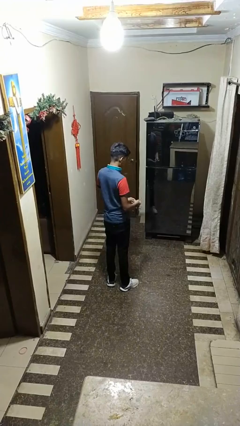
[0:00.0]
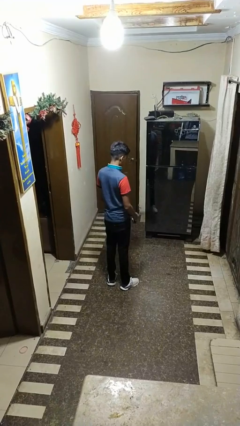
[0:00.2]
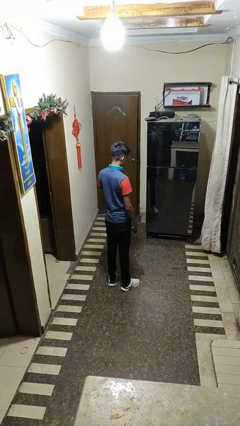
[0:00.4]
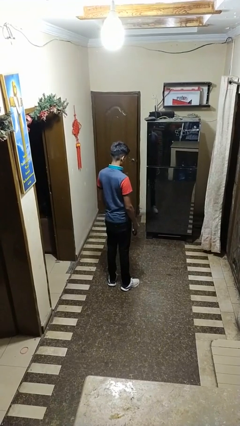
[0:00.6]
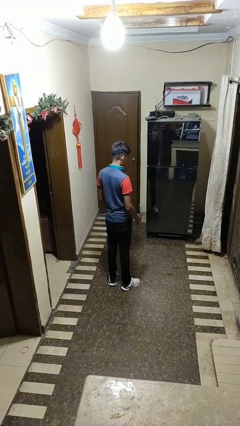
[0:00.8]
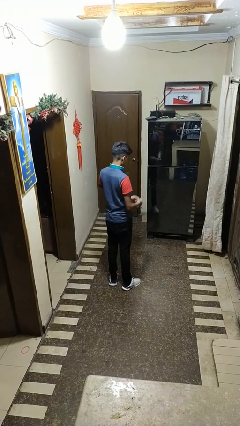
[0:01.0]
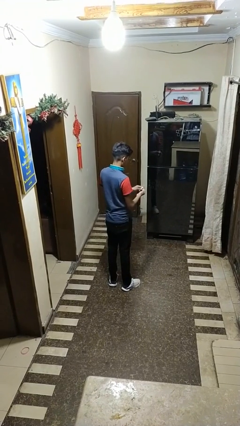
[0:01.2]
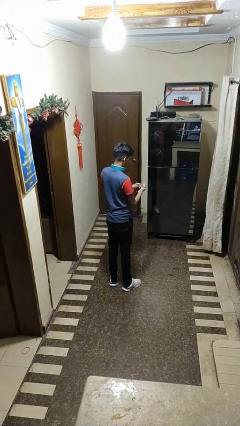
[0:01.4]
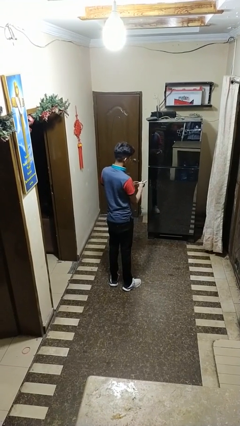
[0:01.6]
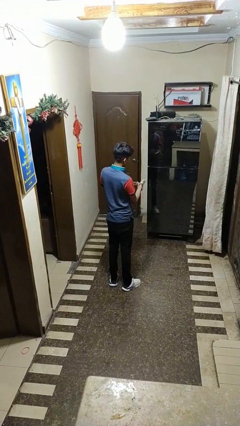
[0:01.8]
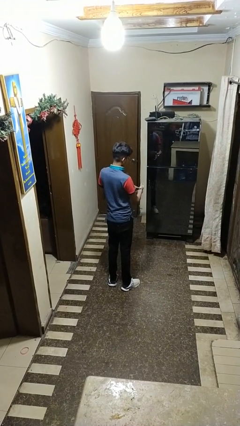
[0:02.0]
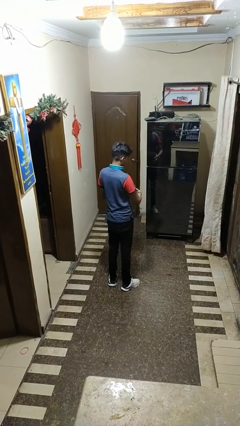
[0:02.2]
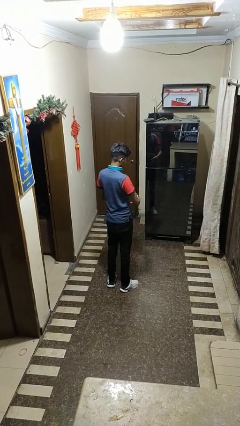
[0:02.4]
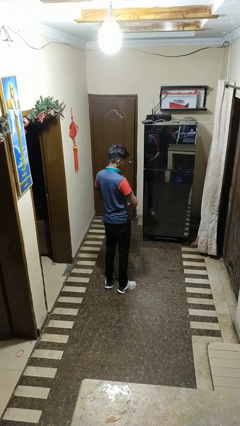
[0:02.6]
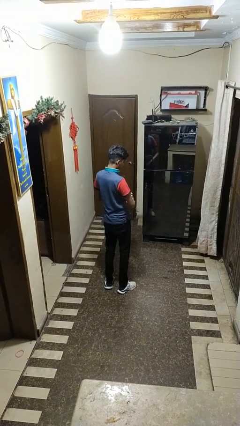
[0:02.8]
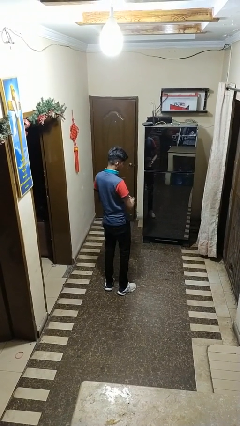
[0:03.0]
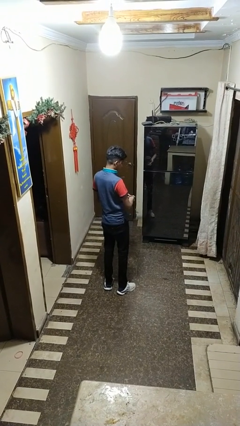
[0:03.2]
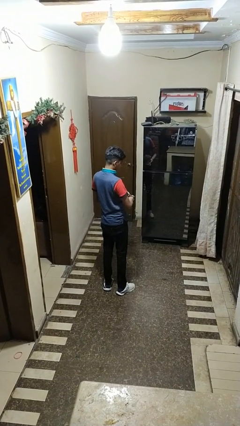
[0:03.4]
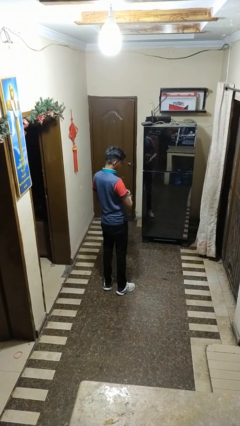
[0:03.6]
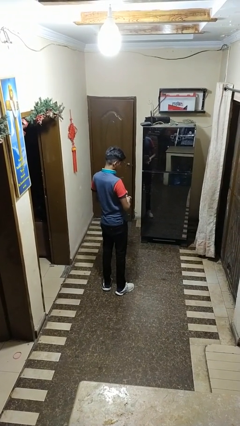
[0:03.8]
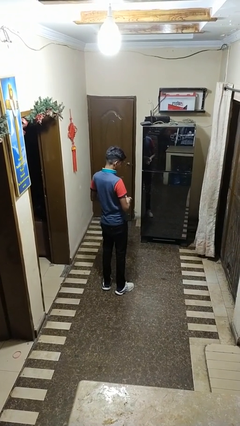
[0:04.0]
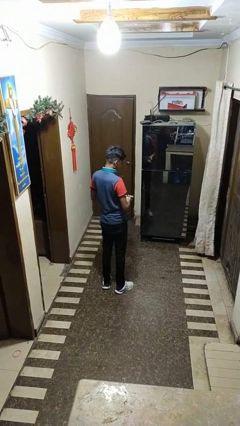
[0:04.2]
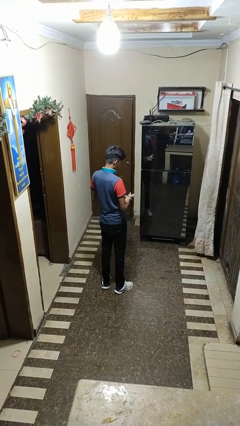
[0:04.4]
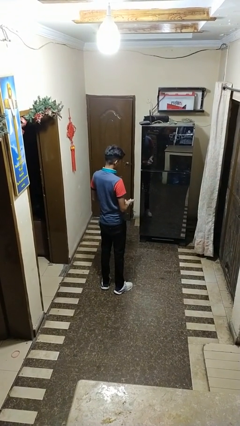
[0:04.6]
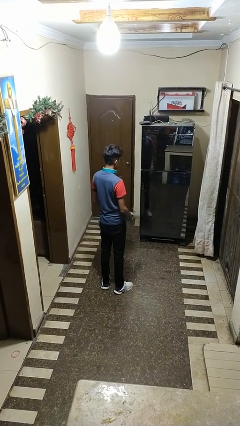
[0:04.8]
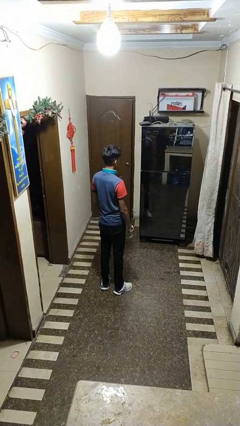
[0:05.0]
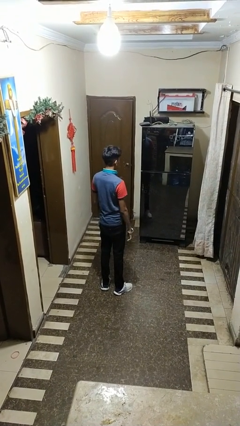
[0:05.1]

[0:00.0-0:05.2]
person puts on wristwatch

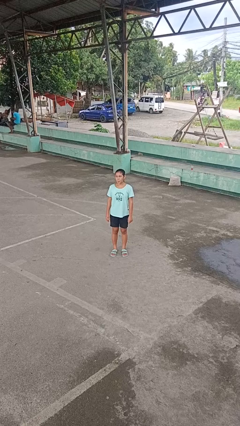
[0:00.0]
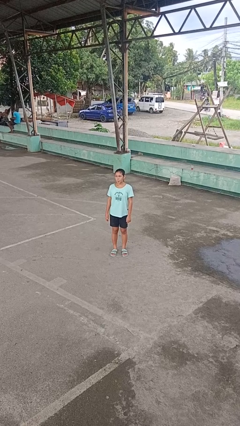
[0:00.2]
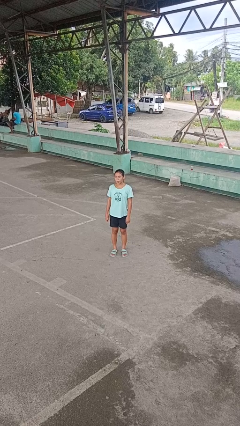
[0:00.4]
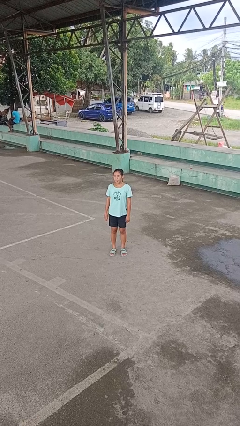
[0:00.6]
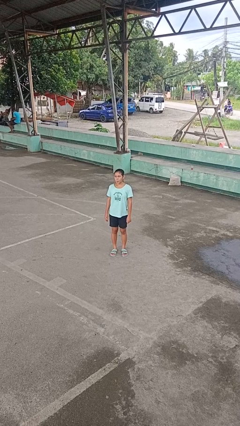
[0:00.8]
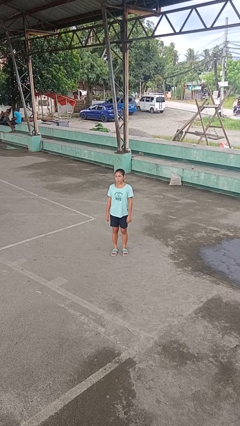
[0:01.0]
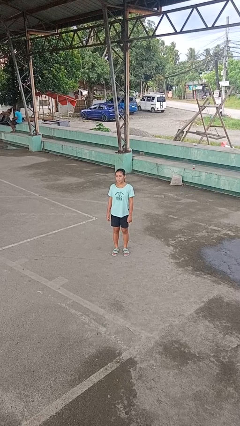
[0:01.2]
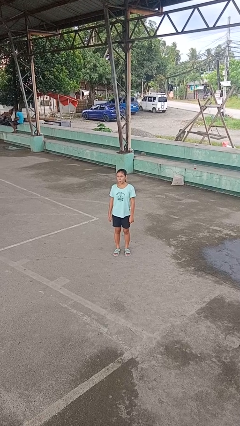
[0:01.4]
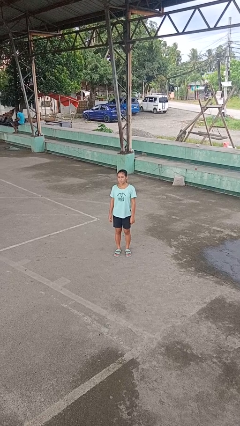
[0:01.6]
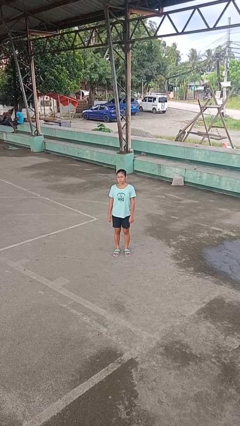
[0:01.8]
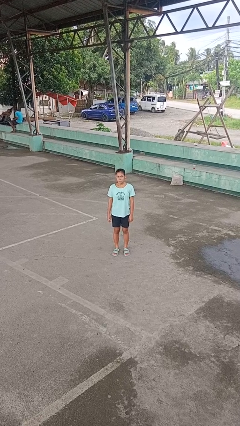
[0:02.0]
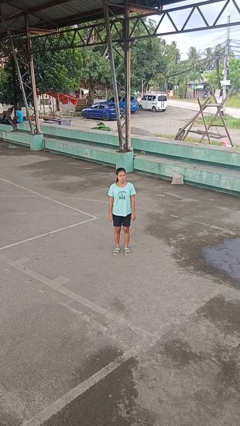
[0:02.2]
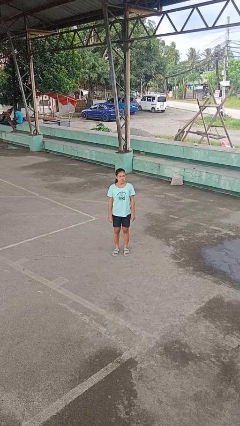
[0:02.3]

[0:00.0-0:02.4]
person sticks out tongue

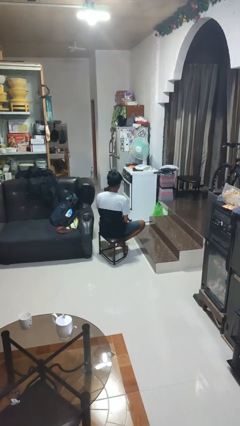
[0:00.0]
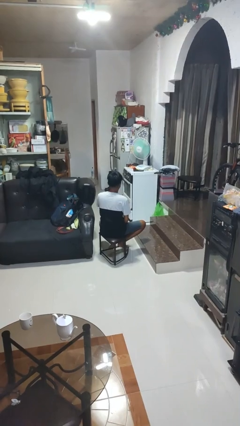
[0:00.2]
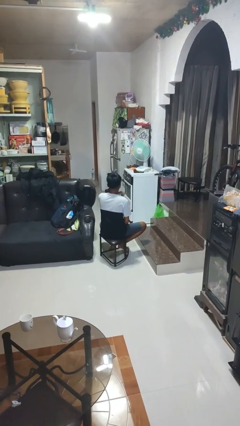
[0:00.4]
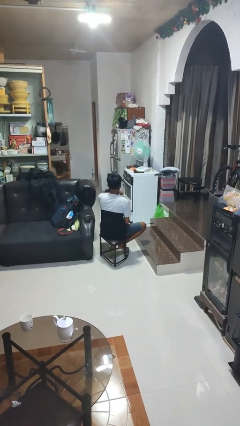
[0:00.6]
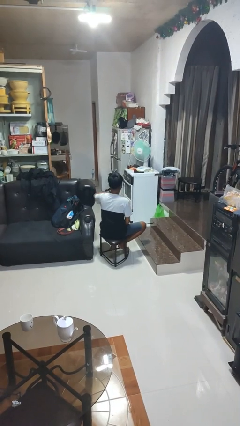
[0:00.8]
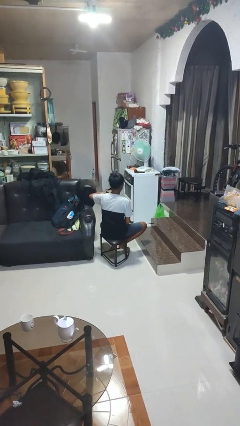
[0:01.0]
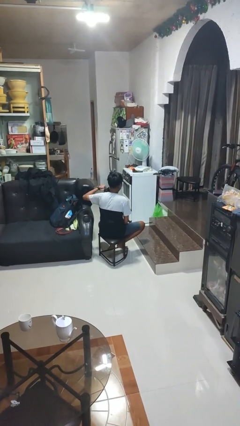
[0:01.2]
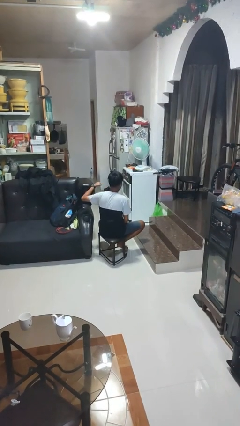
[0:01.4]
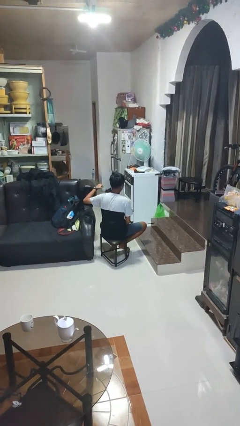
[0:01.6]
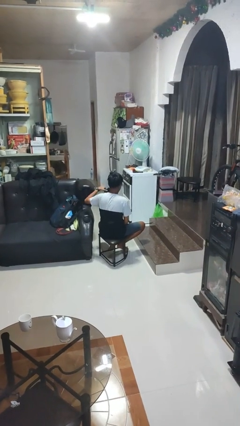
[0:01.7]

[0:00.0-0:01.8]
person gestures cut

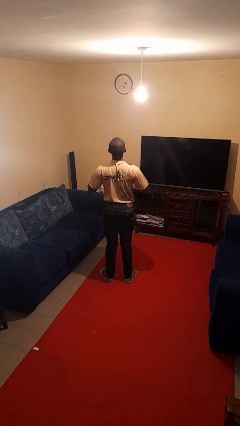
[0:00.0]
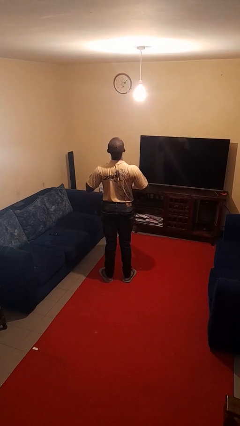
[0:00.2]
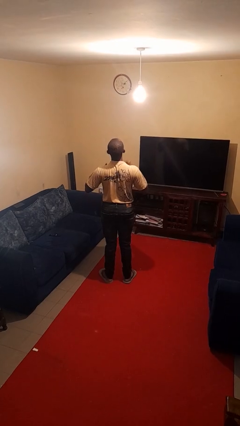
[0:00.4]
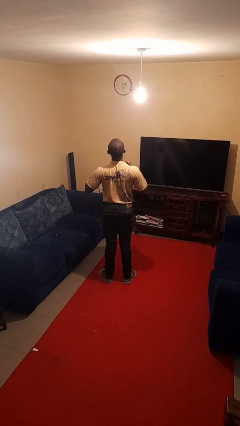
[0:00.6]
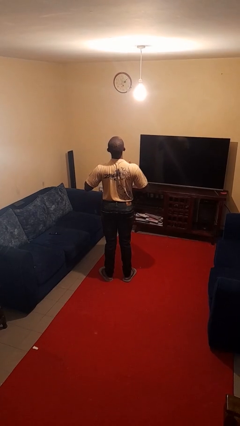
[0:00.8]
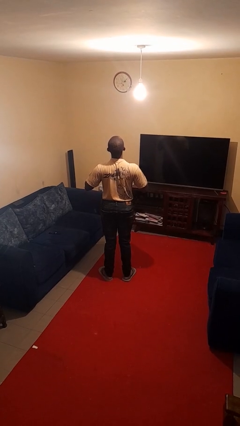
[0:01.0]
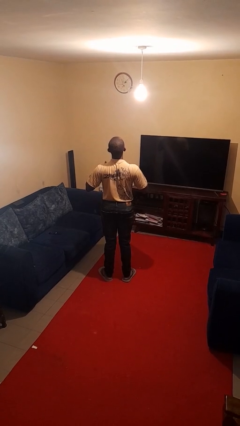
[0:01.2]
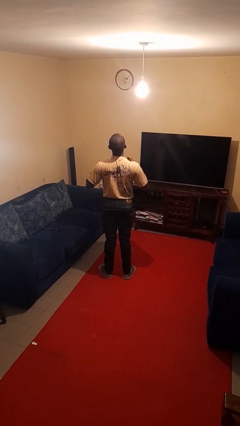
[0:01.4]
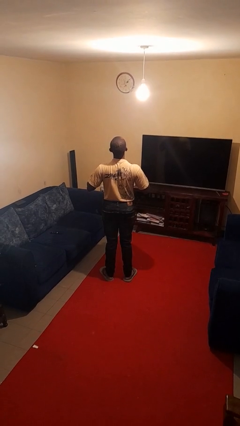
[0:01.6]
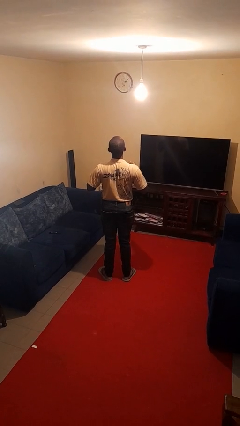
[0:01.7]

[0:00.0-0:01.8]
person drums on chest

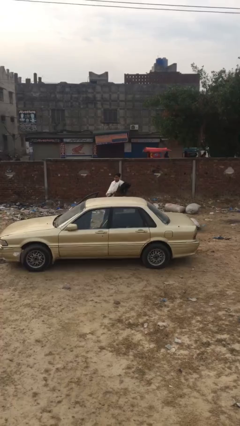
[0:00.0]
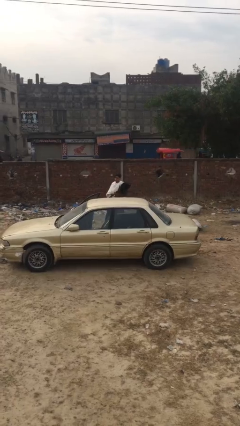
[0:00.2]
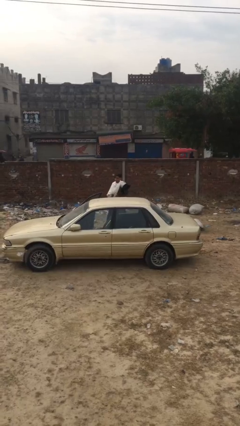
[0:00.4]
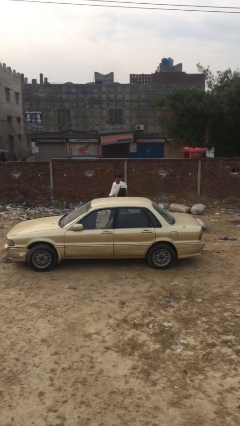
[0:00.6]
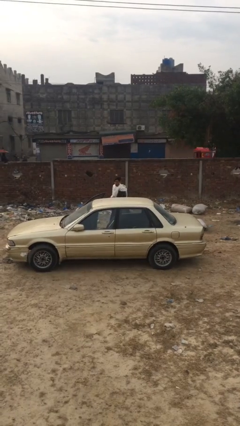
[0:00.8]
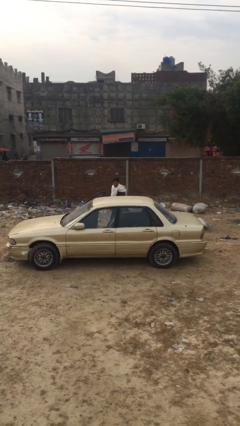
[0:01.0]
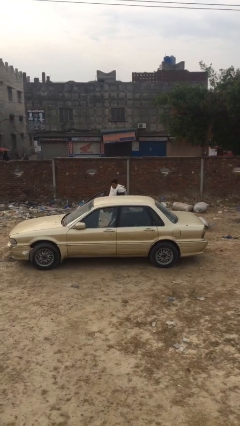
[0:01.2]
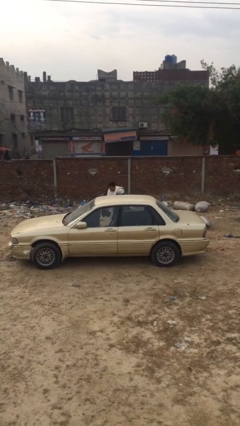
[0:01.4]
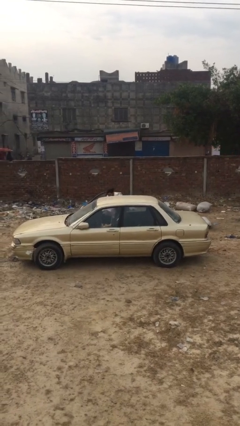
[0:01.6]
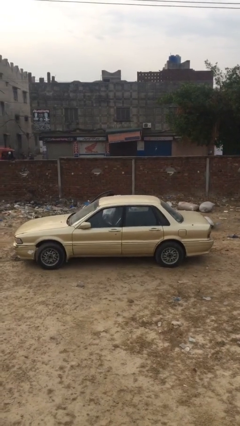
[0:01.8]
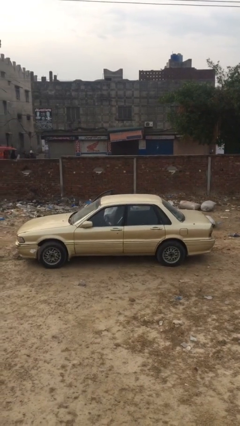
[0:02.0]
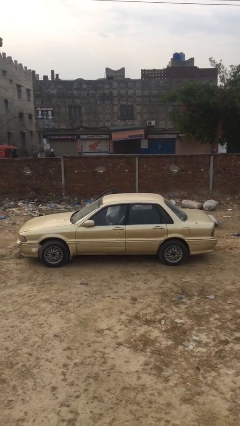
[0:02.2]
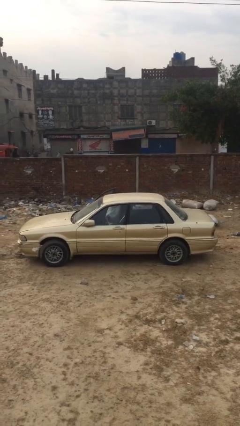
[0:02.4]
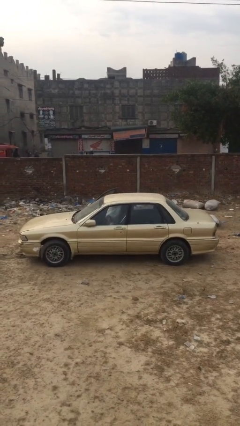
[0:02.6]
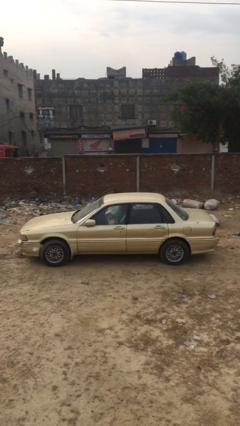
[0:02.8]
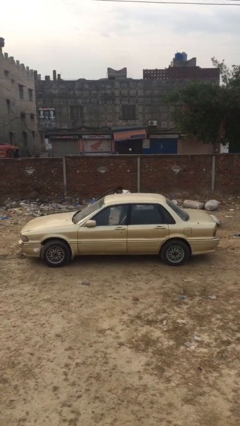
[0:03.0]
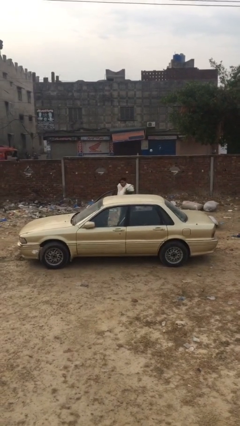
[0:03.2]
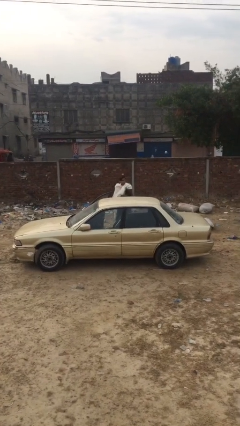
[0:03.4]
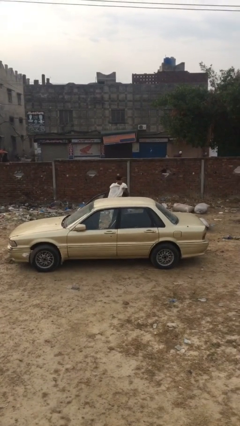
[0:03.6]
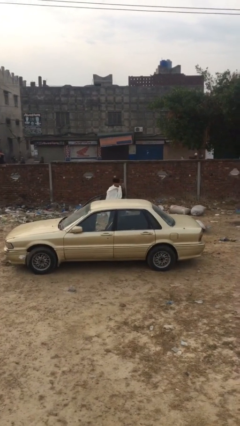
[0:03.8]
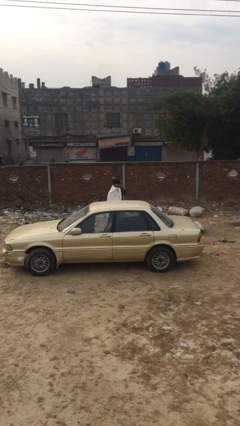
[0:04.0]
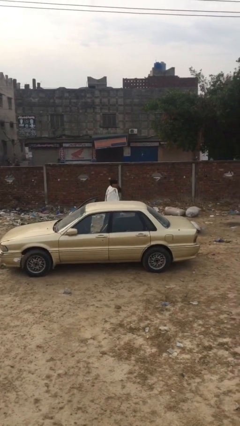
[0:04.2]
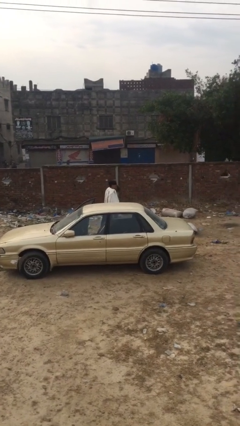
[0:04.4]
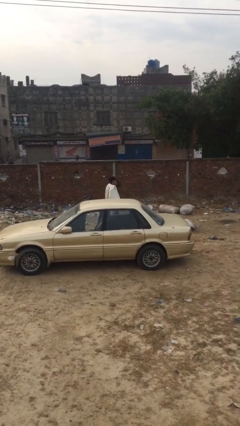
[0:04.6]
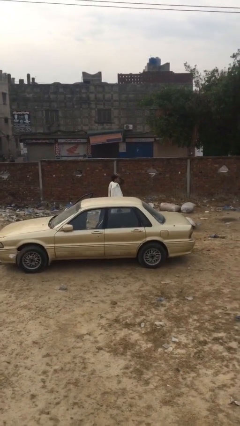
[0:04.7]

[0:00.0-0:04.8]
person loads car

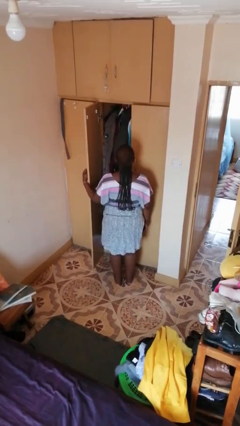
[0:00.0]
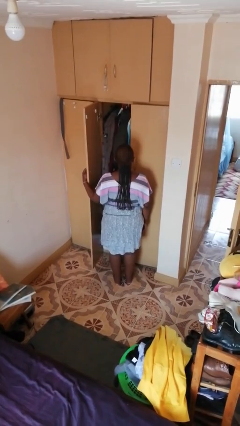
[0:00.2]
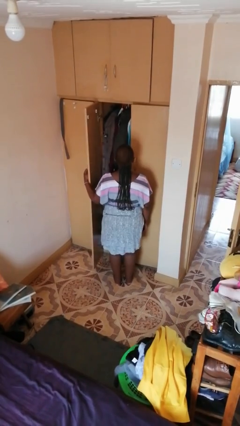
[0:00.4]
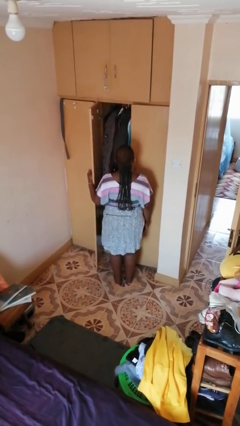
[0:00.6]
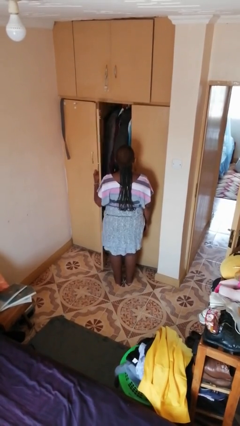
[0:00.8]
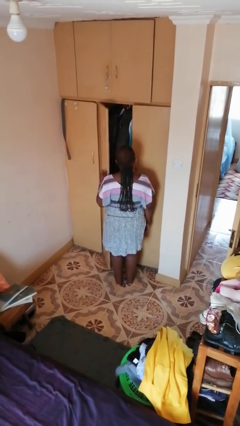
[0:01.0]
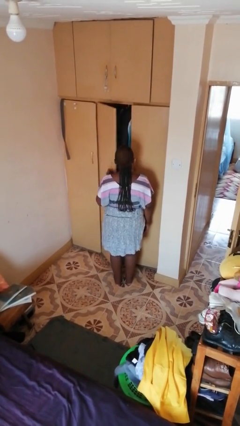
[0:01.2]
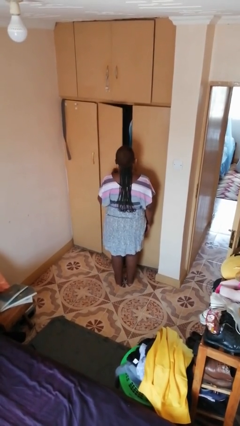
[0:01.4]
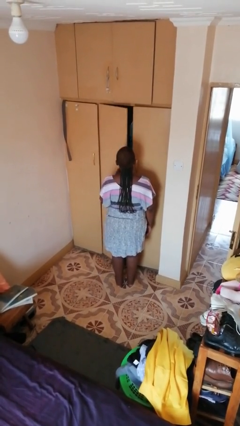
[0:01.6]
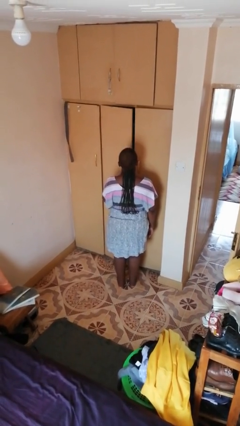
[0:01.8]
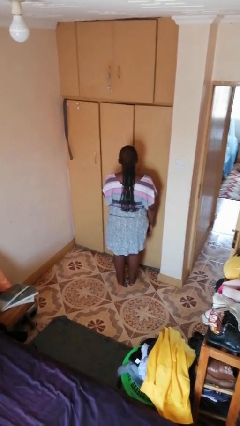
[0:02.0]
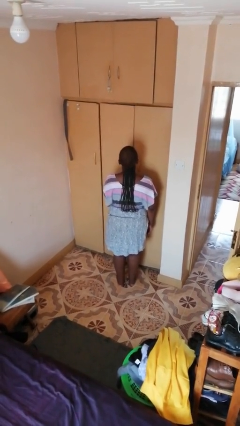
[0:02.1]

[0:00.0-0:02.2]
person closes closet door
